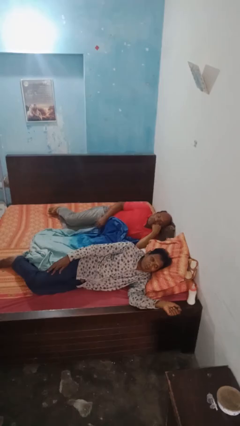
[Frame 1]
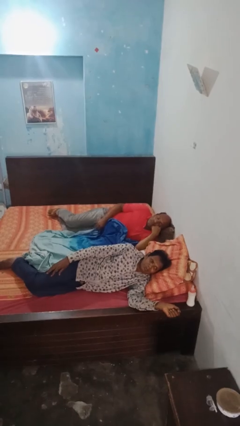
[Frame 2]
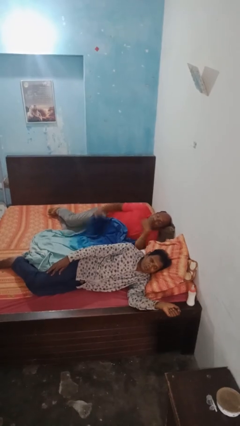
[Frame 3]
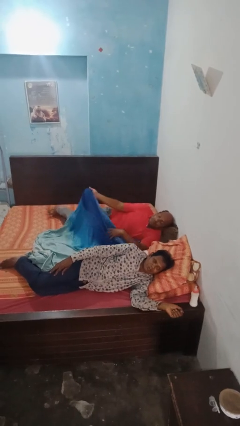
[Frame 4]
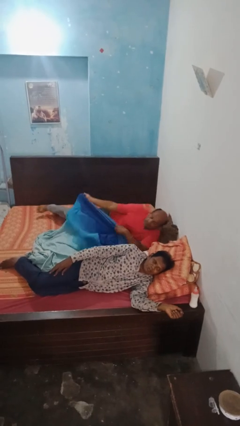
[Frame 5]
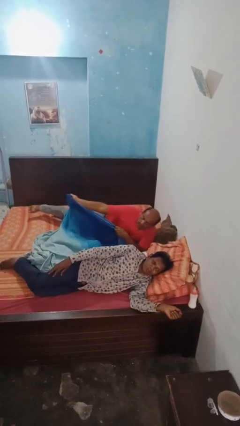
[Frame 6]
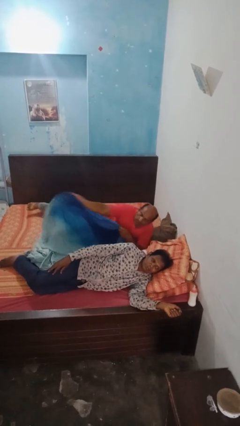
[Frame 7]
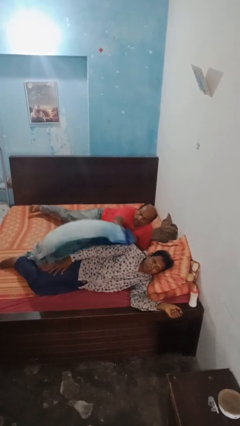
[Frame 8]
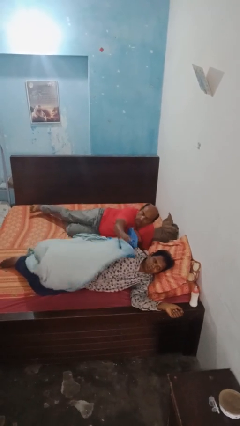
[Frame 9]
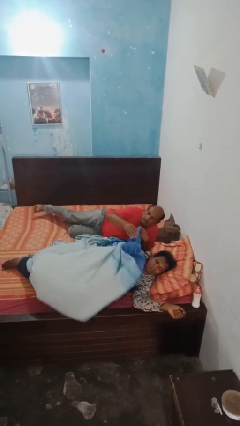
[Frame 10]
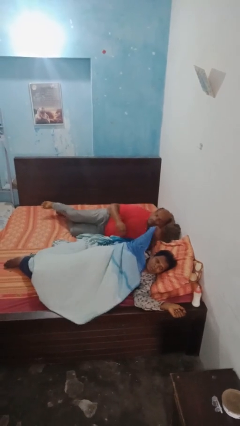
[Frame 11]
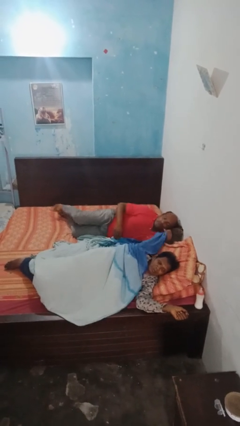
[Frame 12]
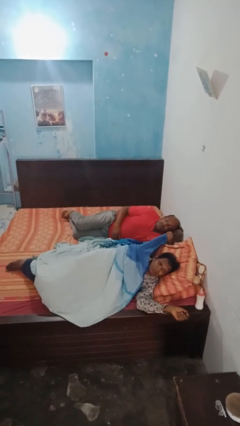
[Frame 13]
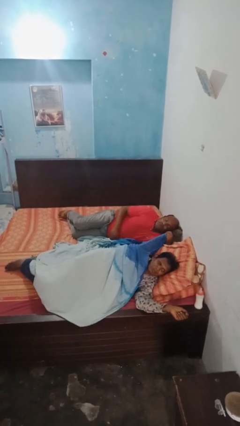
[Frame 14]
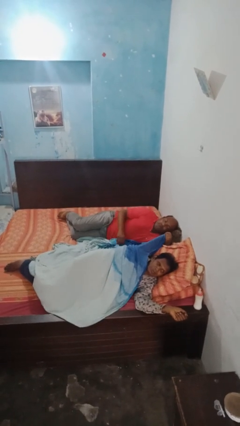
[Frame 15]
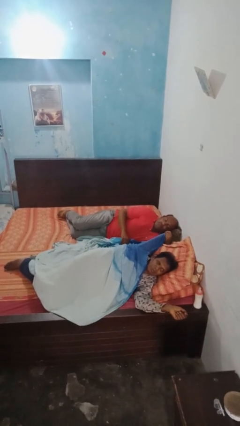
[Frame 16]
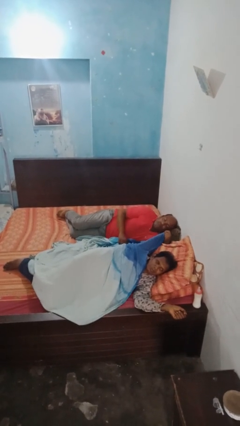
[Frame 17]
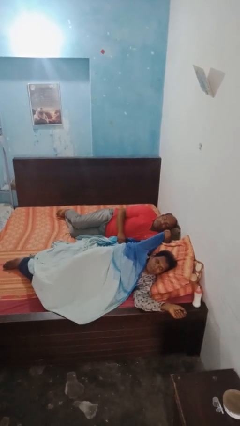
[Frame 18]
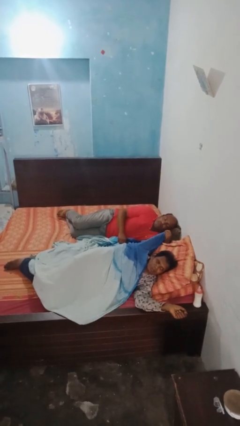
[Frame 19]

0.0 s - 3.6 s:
person covers friend with blanket

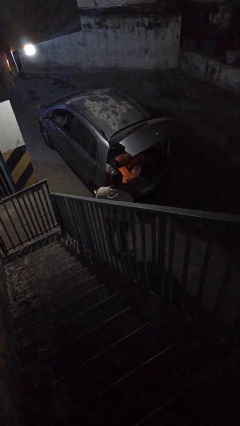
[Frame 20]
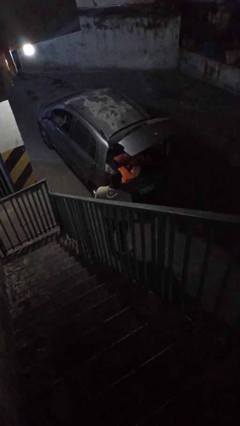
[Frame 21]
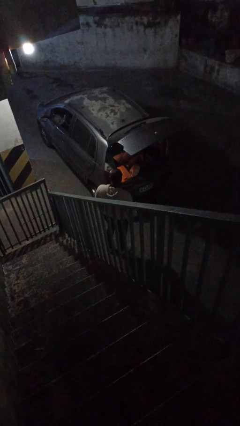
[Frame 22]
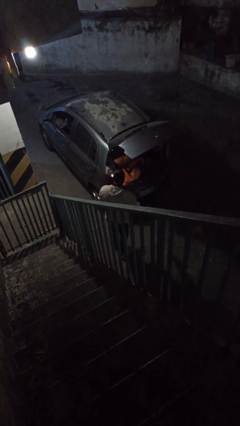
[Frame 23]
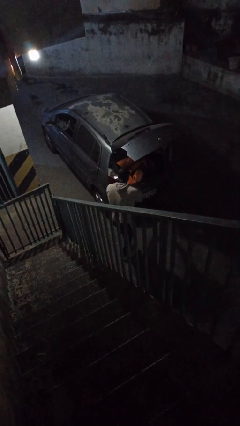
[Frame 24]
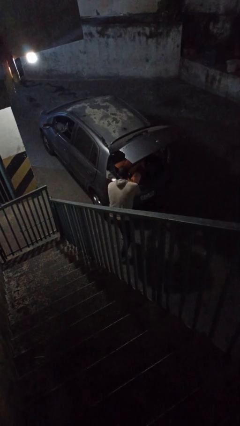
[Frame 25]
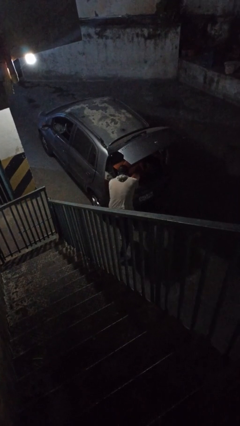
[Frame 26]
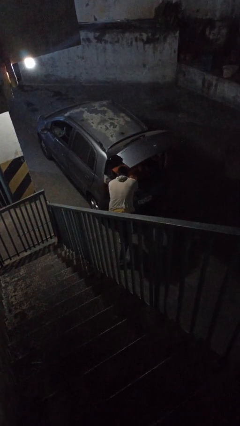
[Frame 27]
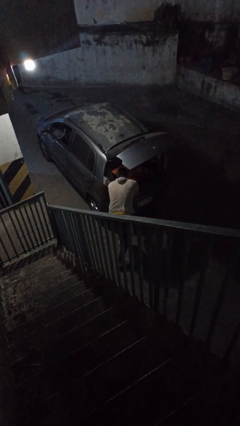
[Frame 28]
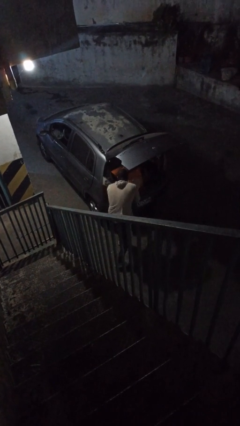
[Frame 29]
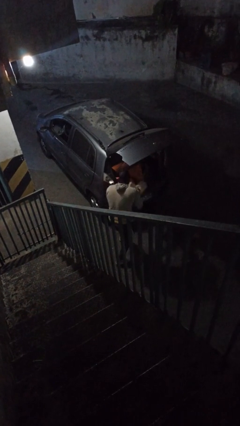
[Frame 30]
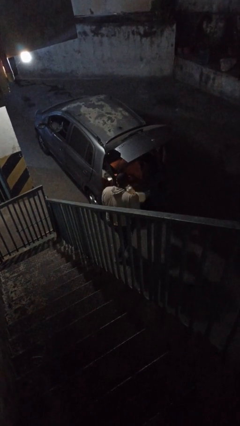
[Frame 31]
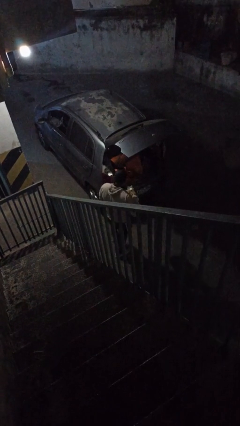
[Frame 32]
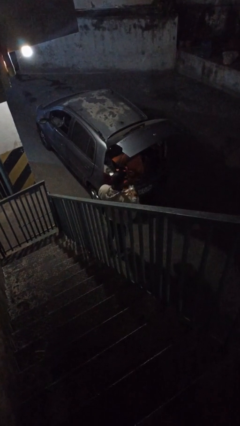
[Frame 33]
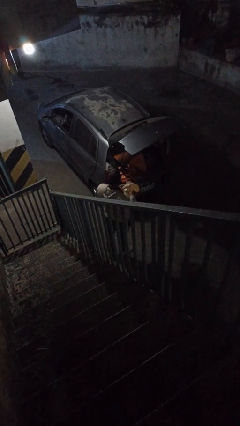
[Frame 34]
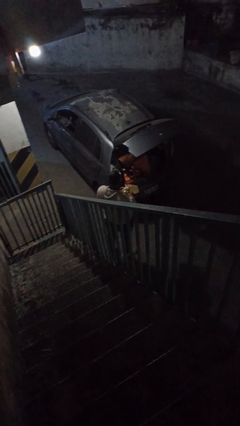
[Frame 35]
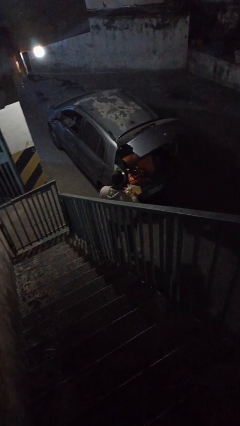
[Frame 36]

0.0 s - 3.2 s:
person unloads car

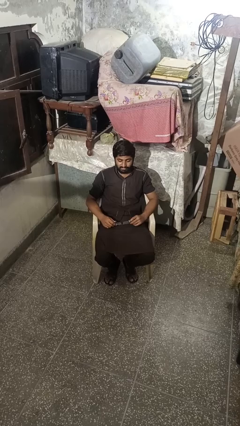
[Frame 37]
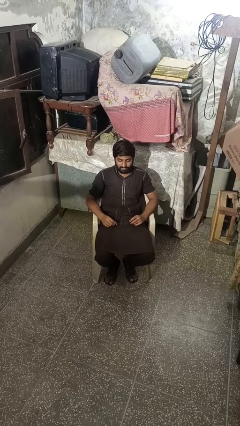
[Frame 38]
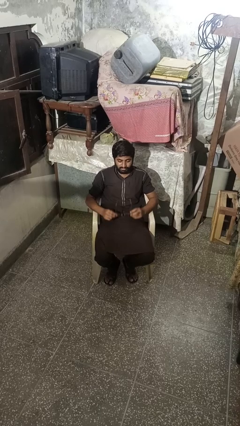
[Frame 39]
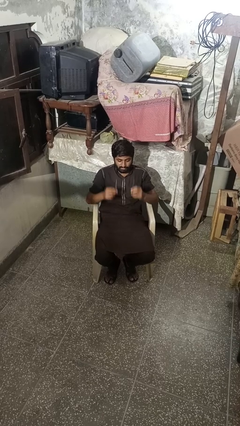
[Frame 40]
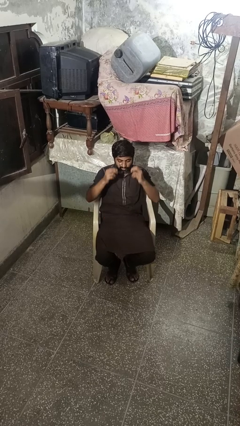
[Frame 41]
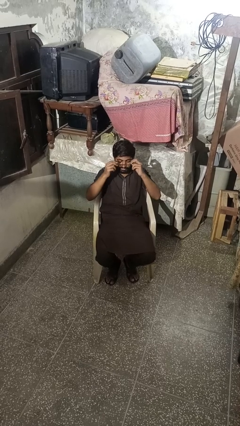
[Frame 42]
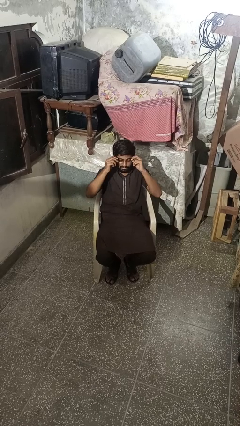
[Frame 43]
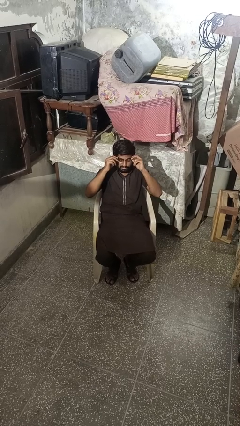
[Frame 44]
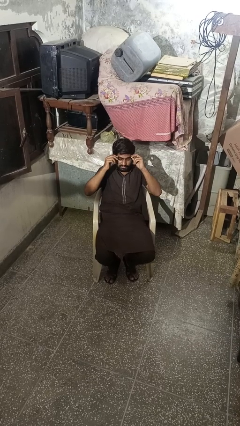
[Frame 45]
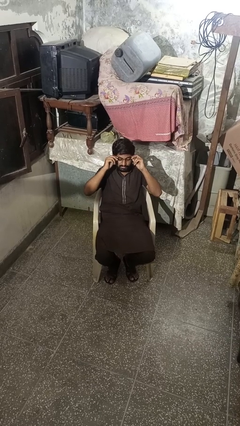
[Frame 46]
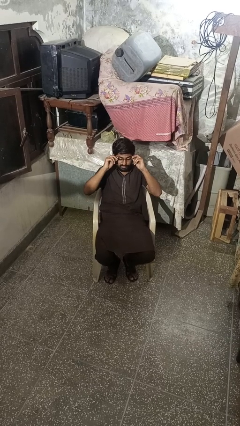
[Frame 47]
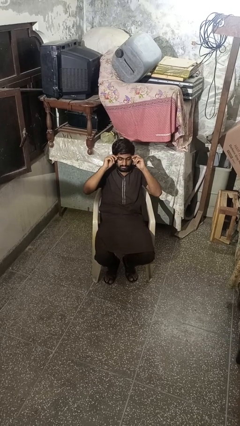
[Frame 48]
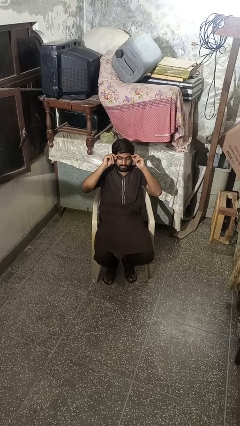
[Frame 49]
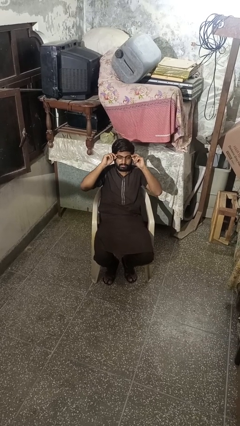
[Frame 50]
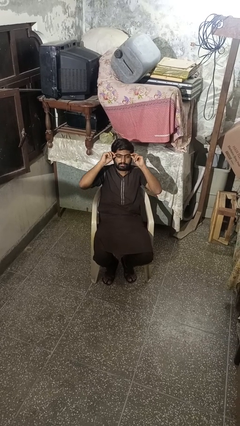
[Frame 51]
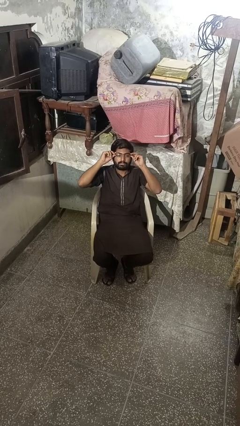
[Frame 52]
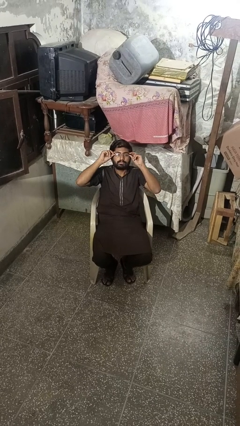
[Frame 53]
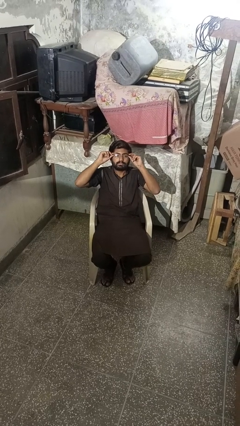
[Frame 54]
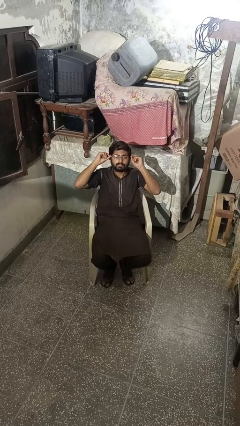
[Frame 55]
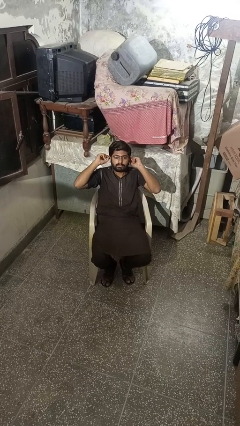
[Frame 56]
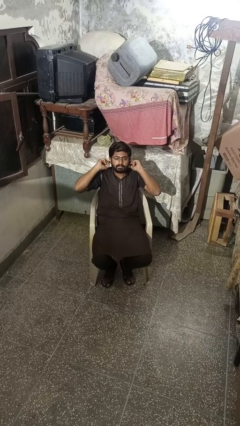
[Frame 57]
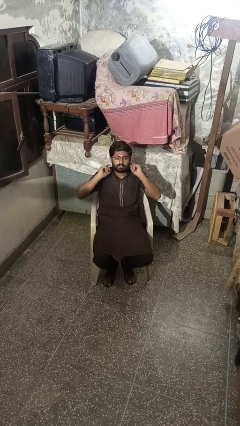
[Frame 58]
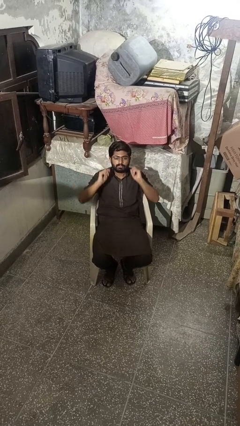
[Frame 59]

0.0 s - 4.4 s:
person puts on glasses

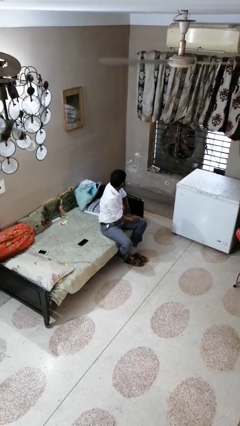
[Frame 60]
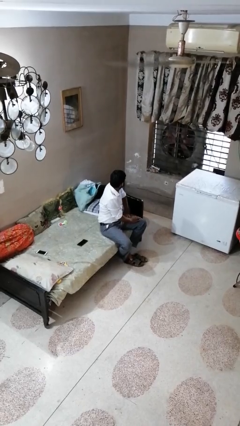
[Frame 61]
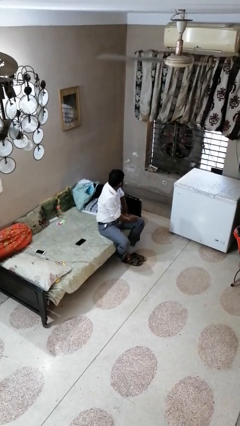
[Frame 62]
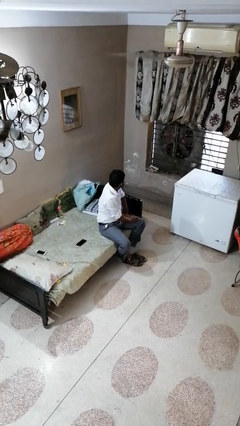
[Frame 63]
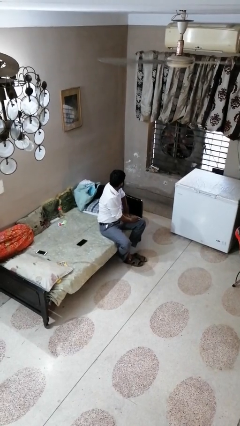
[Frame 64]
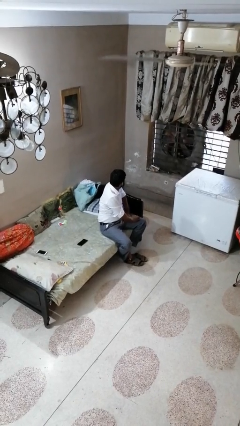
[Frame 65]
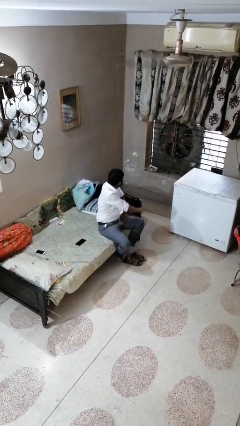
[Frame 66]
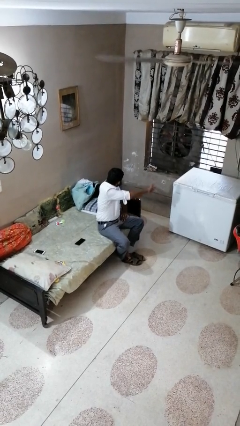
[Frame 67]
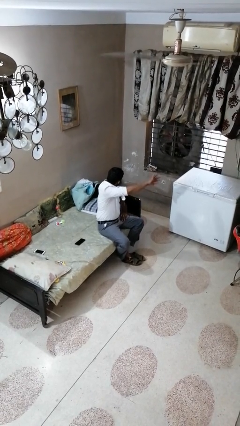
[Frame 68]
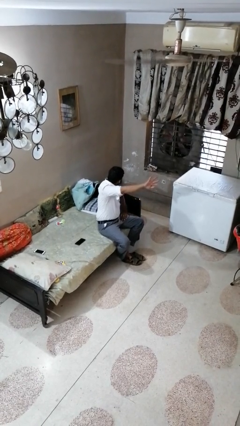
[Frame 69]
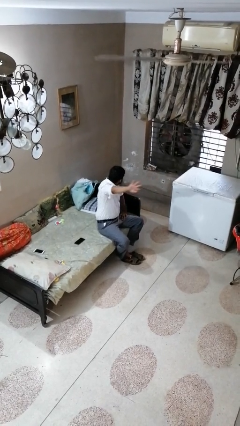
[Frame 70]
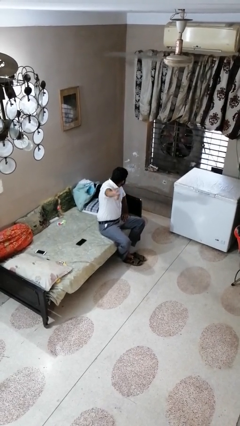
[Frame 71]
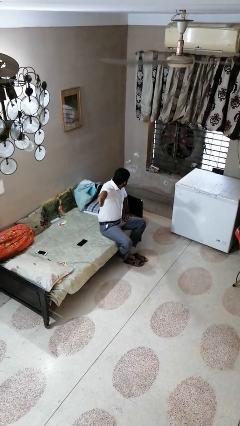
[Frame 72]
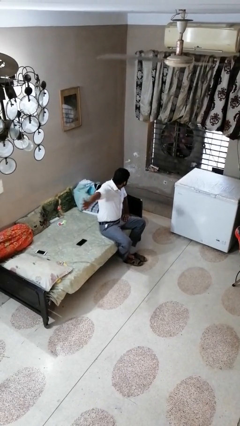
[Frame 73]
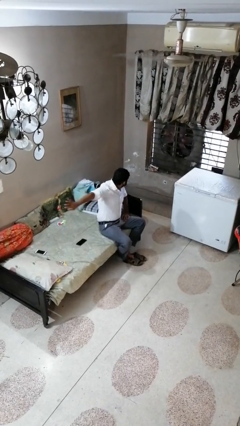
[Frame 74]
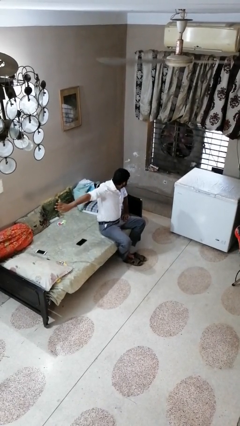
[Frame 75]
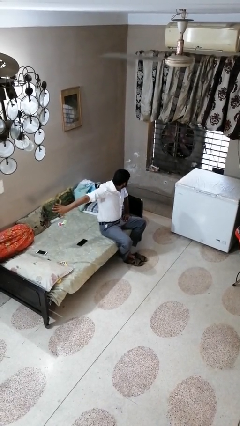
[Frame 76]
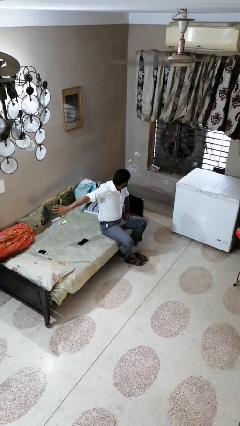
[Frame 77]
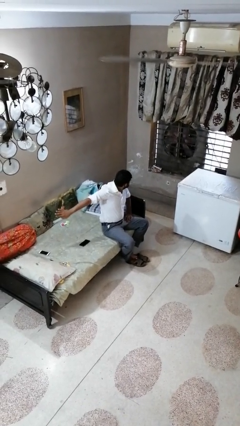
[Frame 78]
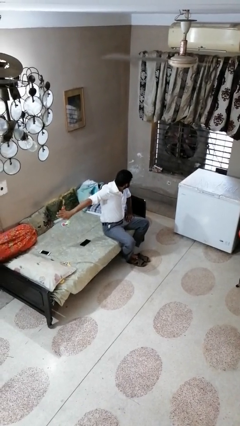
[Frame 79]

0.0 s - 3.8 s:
person gestures swipe right

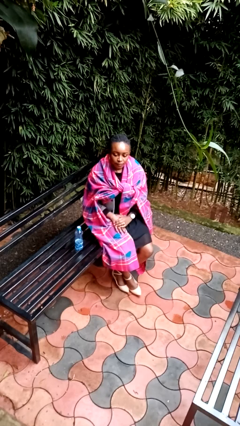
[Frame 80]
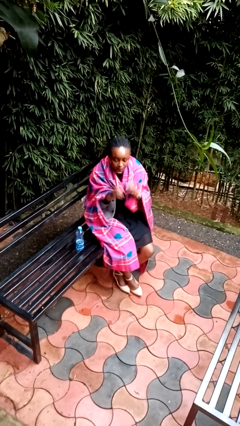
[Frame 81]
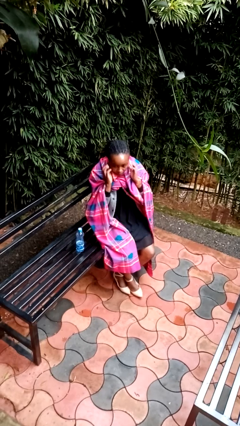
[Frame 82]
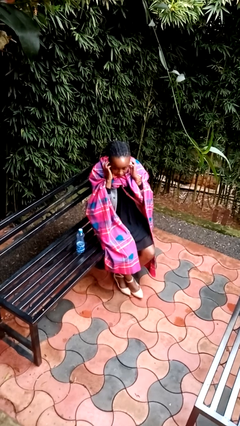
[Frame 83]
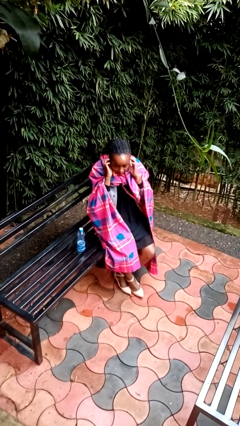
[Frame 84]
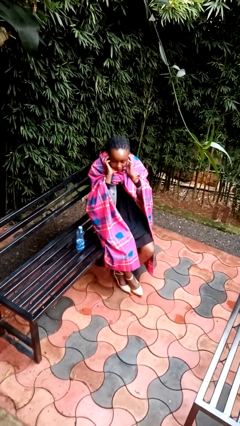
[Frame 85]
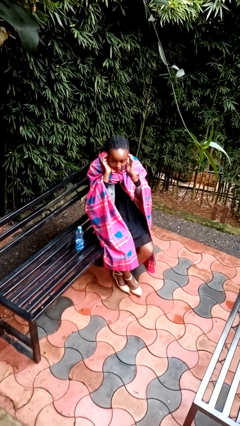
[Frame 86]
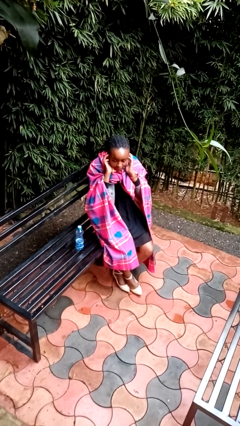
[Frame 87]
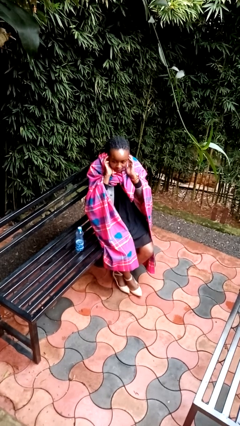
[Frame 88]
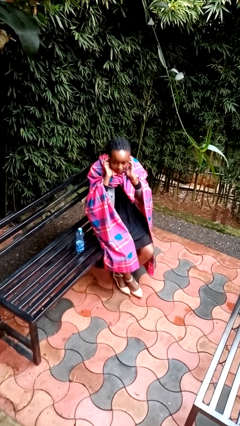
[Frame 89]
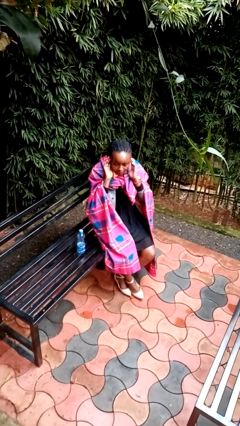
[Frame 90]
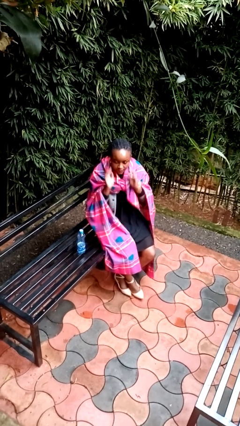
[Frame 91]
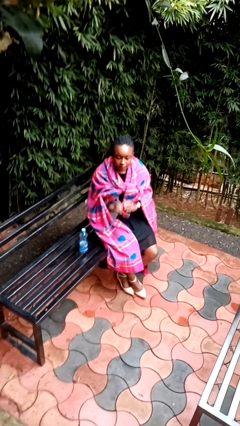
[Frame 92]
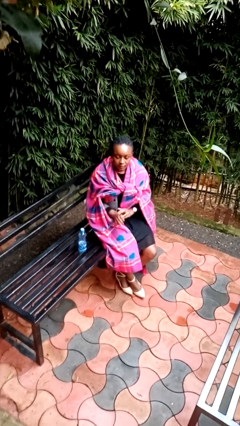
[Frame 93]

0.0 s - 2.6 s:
person puts fingers in ear
